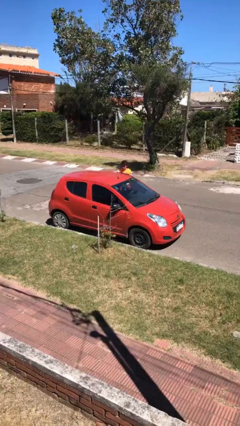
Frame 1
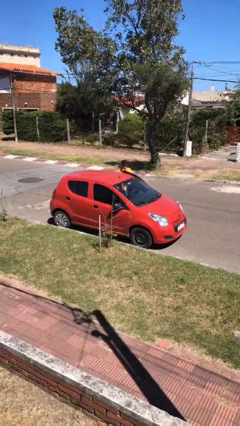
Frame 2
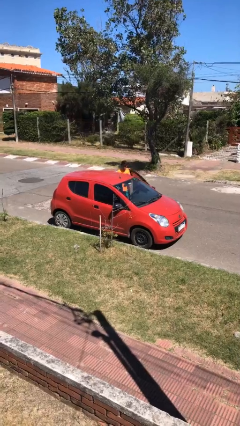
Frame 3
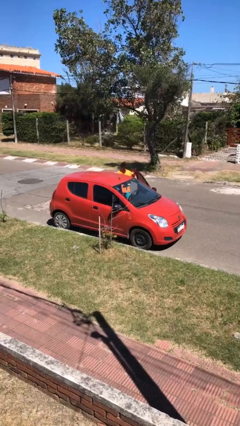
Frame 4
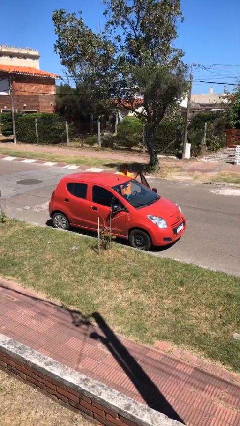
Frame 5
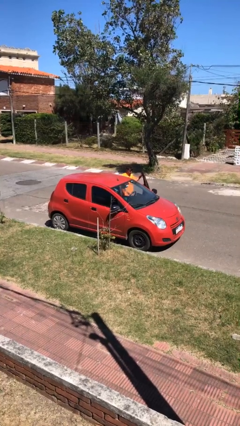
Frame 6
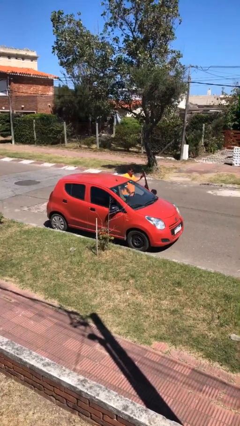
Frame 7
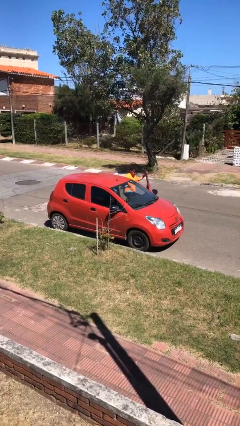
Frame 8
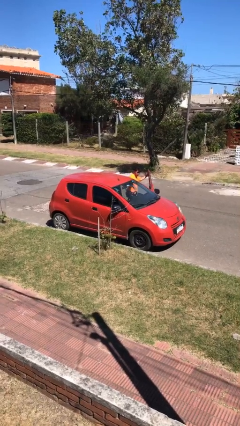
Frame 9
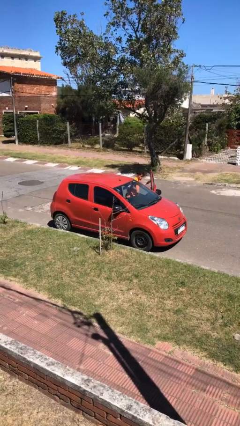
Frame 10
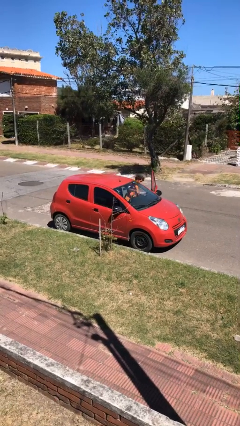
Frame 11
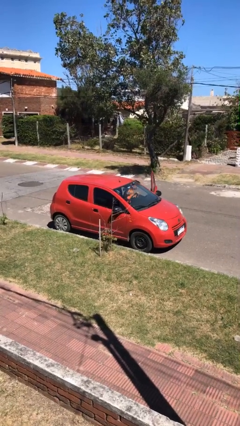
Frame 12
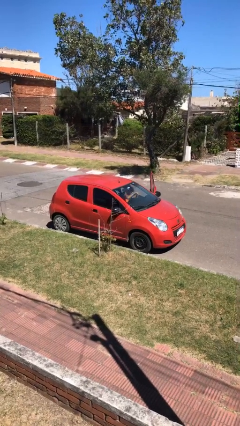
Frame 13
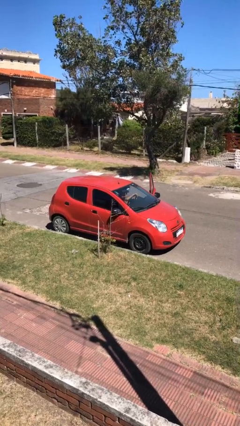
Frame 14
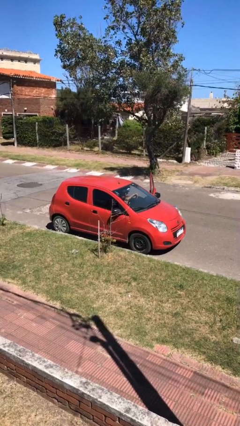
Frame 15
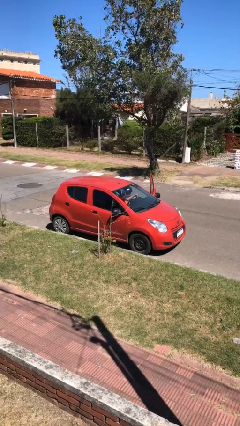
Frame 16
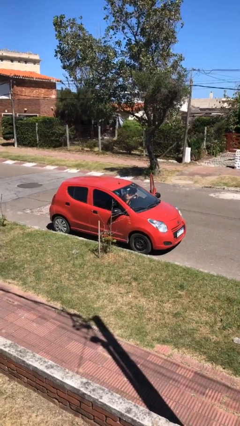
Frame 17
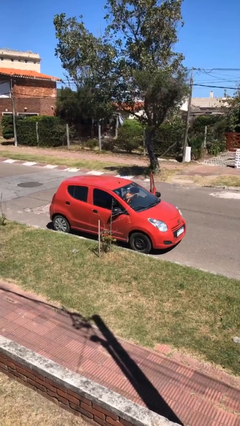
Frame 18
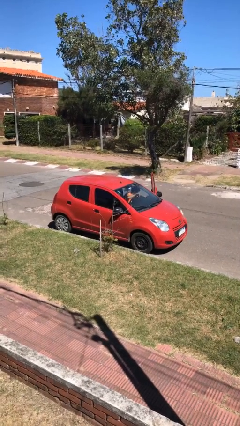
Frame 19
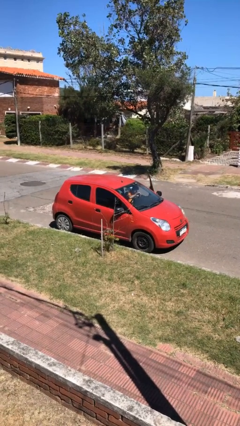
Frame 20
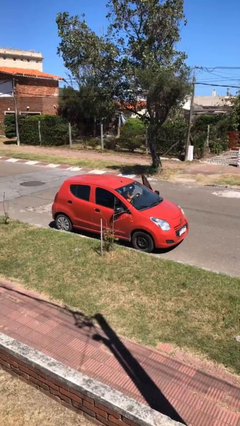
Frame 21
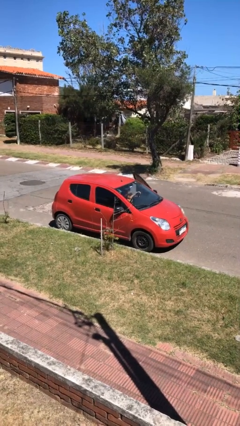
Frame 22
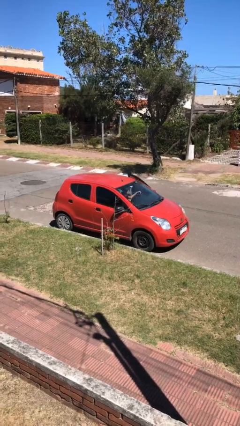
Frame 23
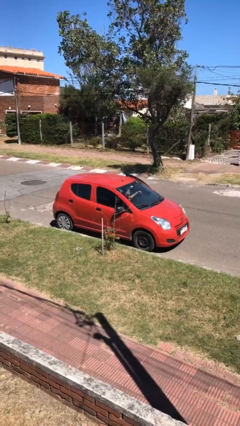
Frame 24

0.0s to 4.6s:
car picks up person

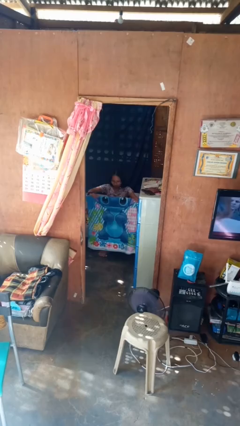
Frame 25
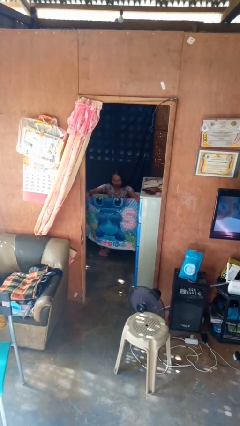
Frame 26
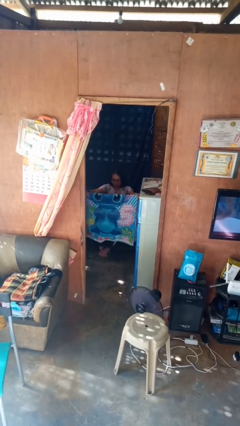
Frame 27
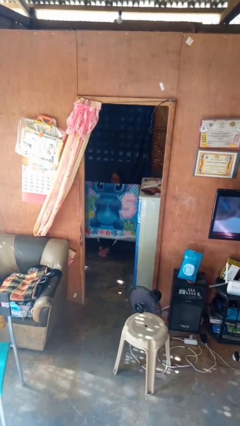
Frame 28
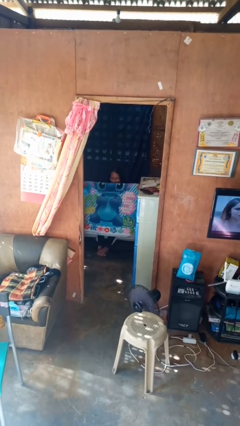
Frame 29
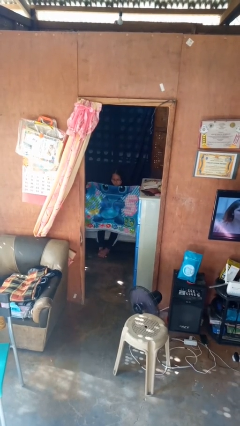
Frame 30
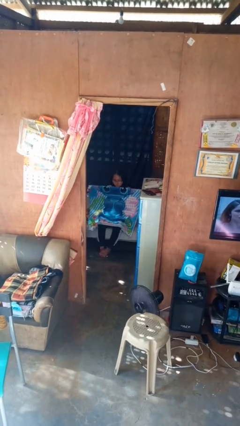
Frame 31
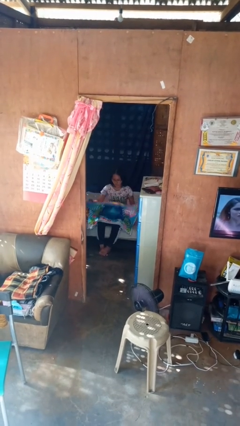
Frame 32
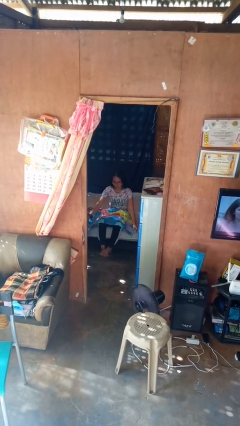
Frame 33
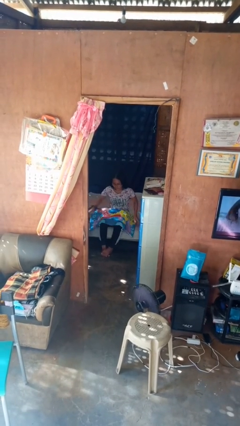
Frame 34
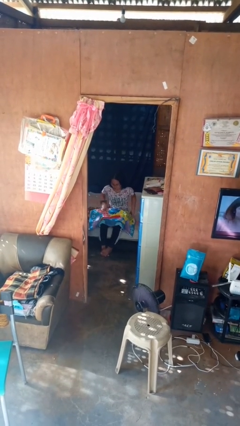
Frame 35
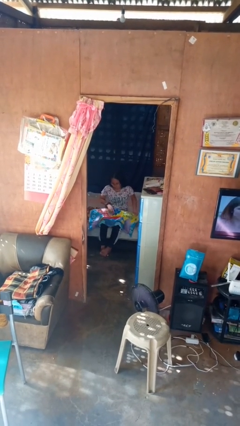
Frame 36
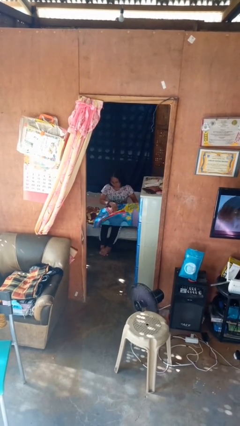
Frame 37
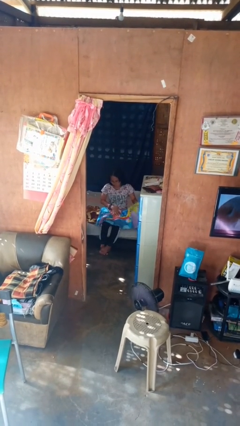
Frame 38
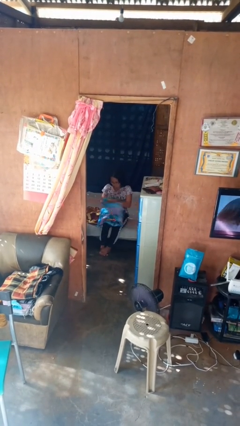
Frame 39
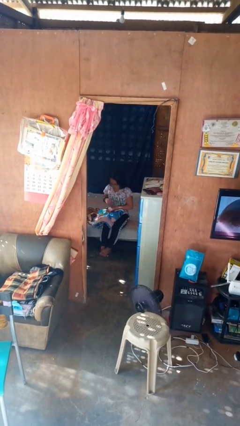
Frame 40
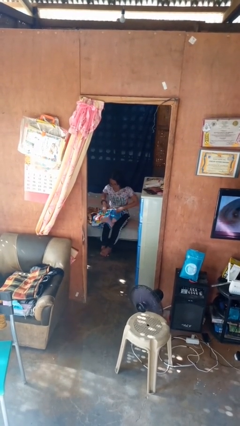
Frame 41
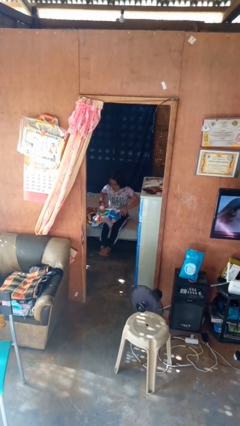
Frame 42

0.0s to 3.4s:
person folds blanket

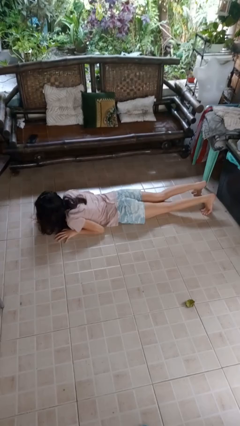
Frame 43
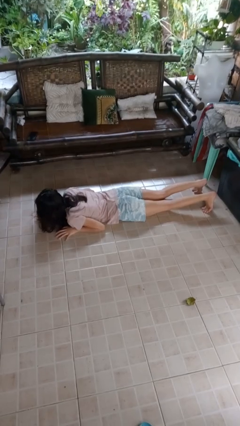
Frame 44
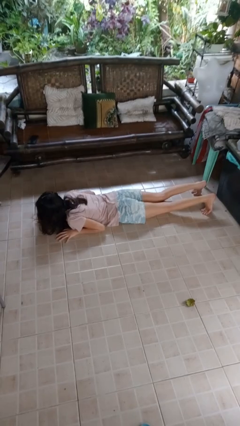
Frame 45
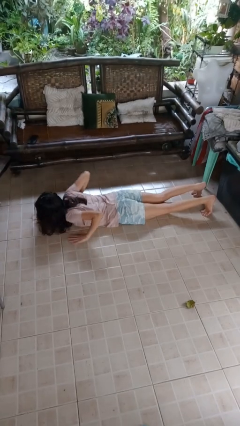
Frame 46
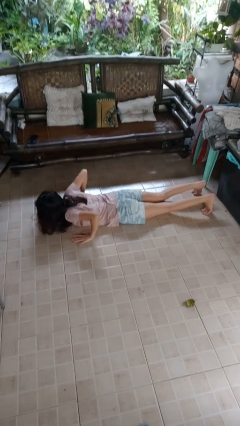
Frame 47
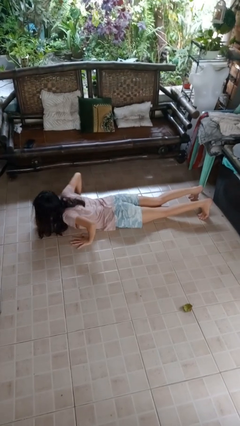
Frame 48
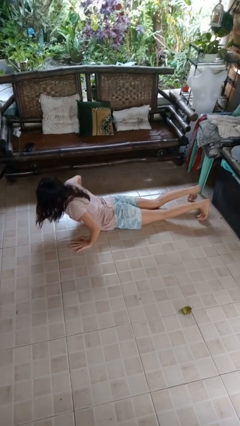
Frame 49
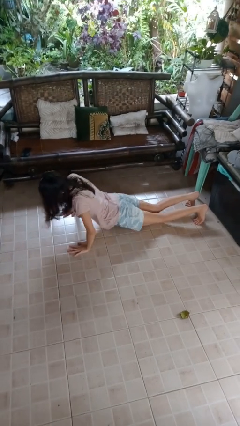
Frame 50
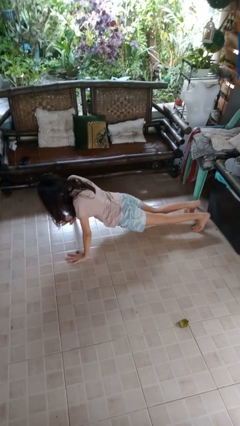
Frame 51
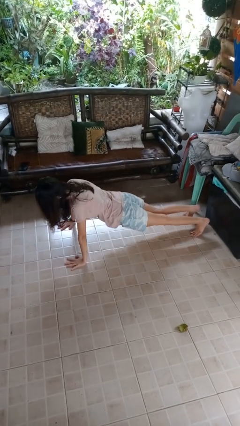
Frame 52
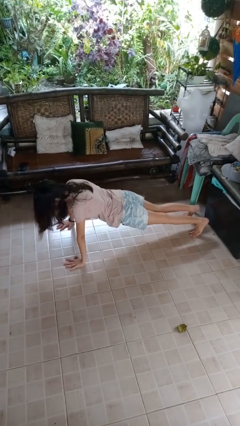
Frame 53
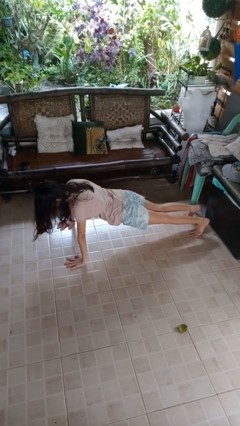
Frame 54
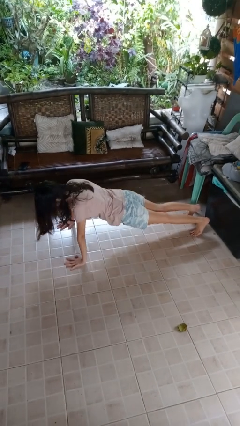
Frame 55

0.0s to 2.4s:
person exercises with pushup

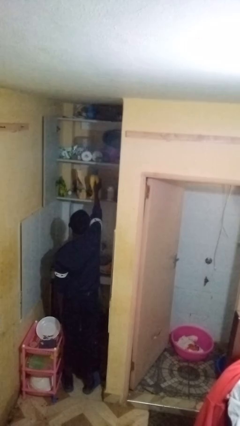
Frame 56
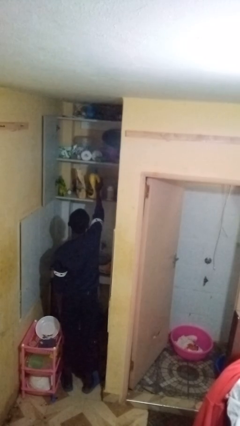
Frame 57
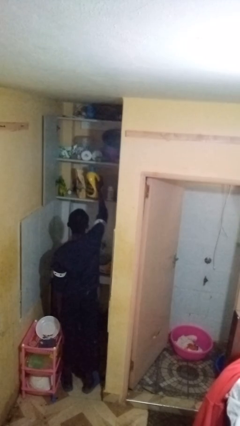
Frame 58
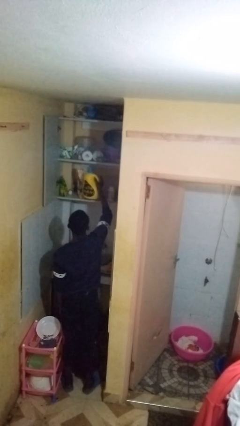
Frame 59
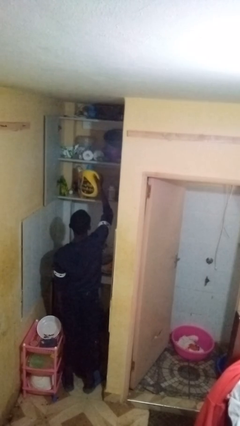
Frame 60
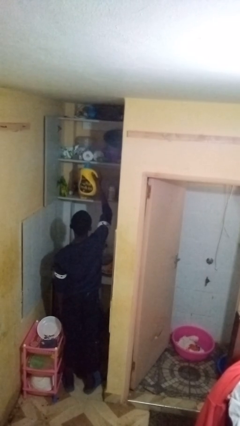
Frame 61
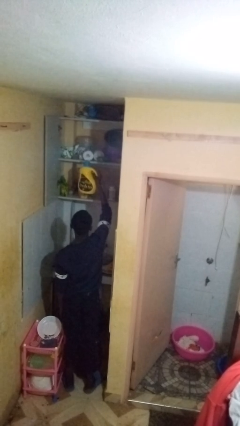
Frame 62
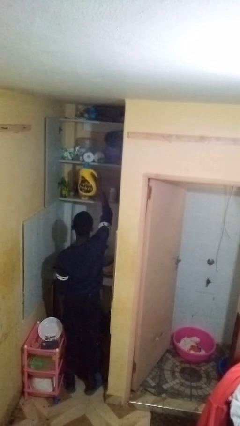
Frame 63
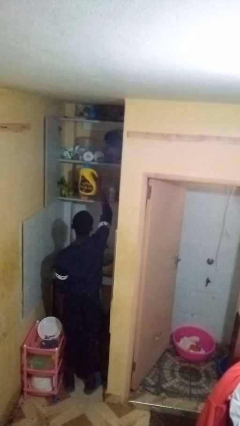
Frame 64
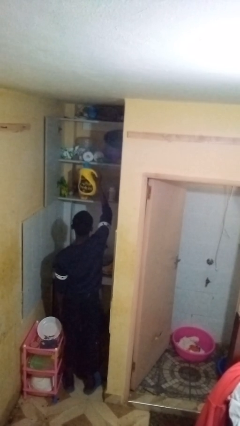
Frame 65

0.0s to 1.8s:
person takes object from cabinet

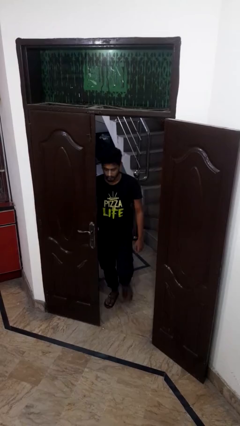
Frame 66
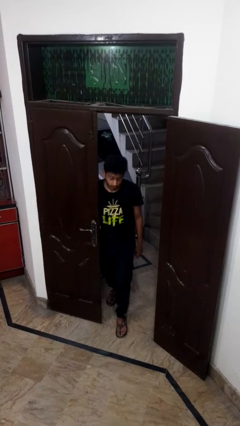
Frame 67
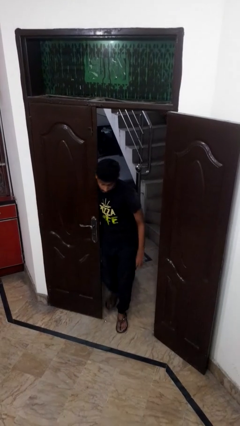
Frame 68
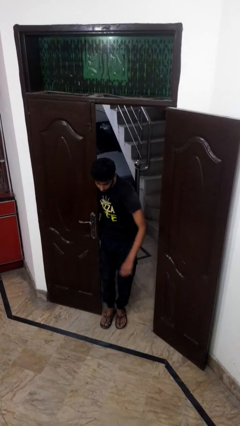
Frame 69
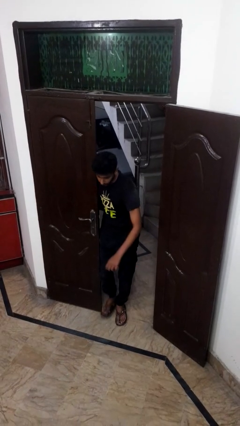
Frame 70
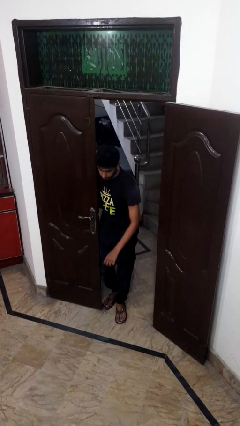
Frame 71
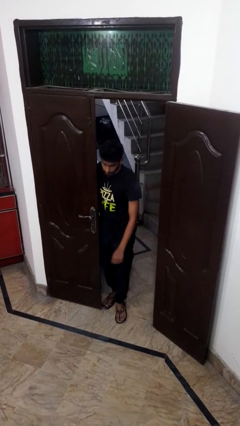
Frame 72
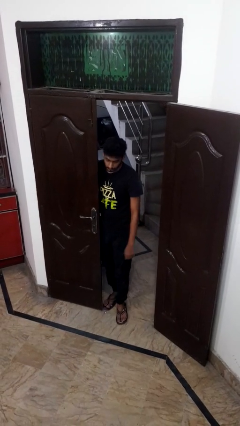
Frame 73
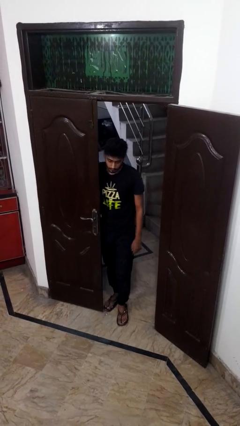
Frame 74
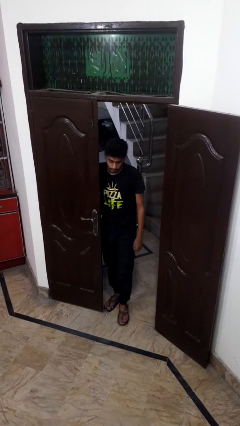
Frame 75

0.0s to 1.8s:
person bumps into wall

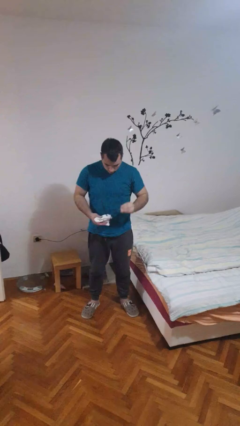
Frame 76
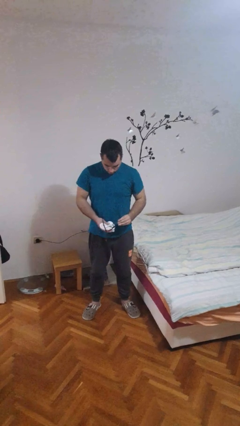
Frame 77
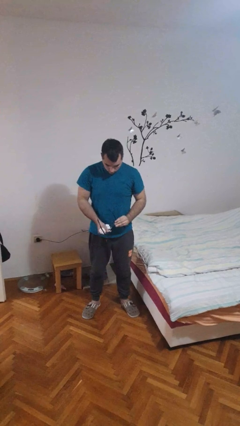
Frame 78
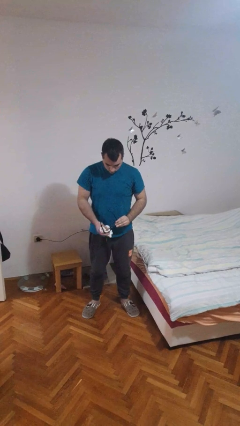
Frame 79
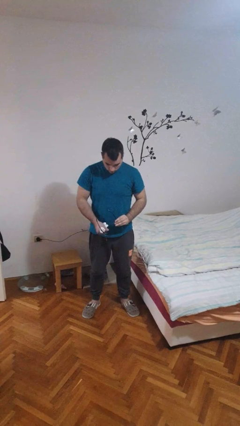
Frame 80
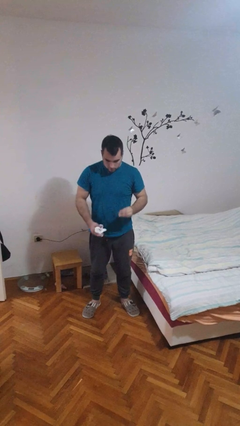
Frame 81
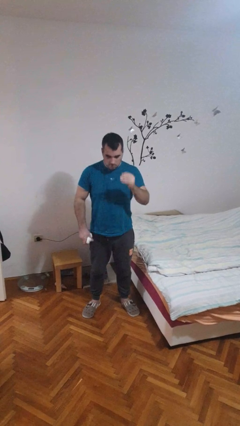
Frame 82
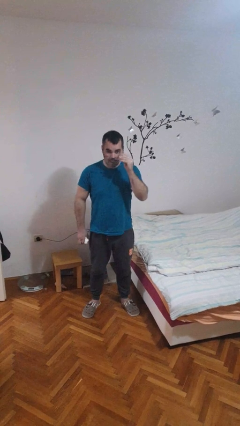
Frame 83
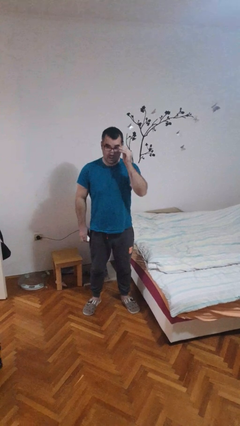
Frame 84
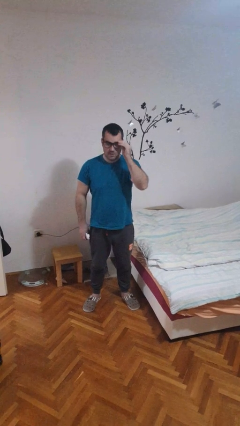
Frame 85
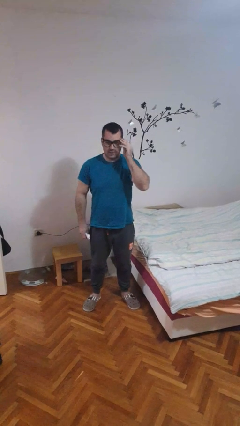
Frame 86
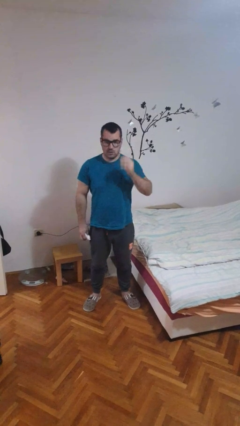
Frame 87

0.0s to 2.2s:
person cleans eyeglasses

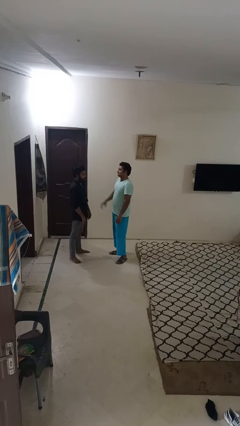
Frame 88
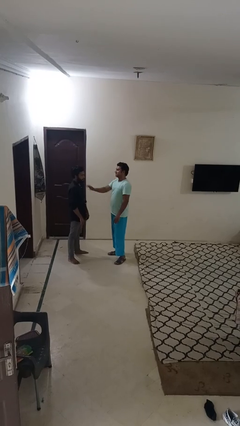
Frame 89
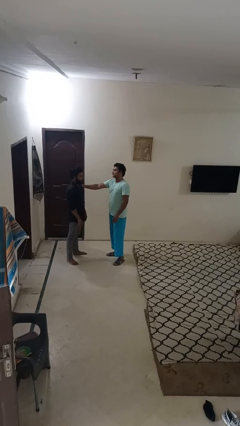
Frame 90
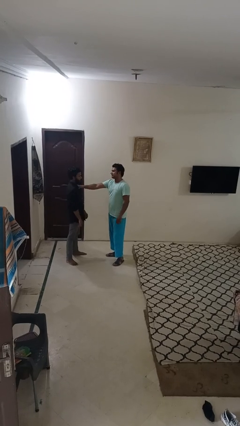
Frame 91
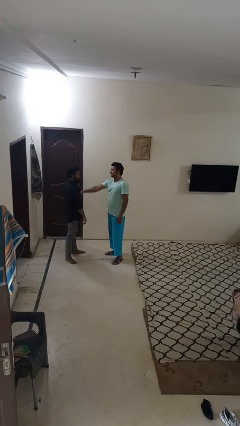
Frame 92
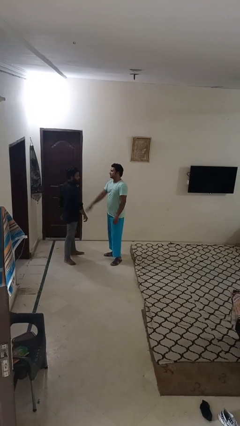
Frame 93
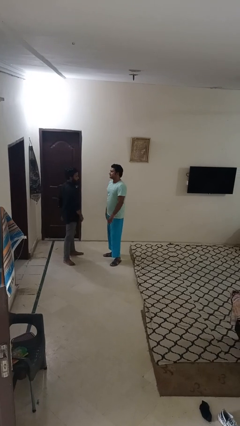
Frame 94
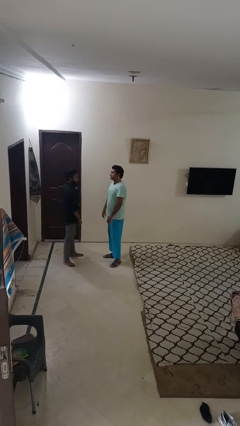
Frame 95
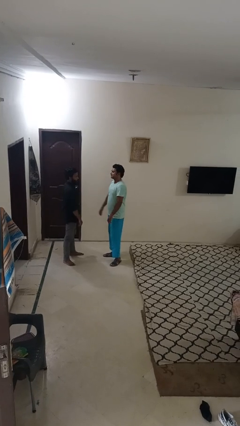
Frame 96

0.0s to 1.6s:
person shoves person
